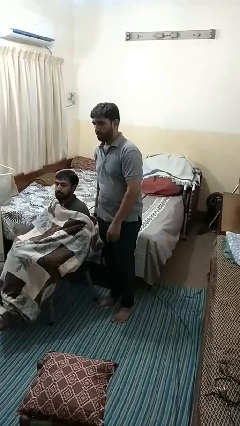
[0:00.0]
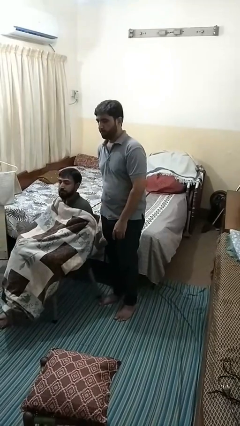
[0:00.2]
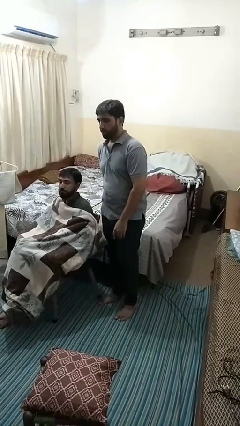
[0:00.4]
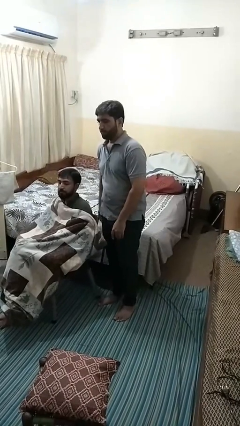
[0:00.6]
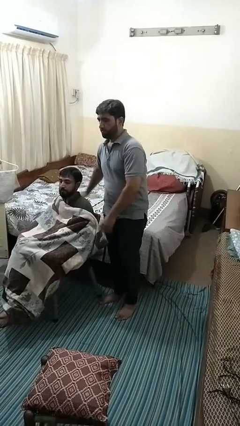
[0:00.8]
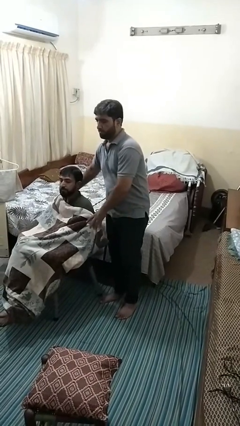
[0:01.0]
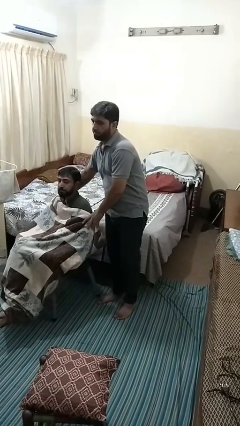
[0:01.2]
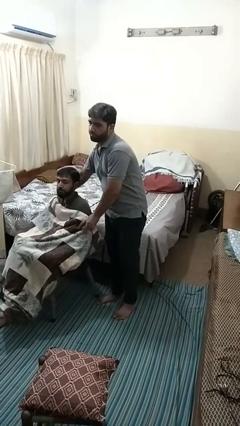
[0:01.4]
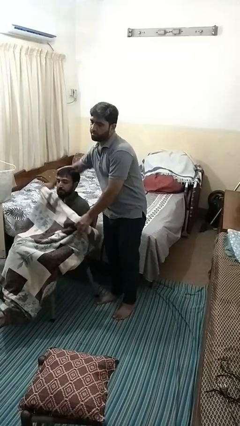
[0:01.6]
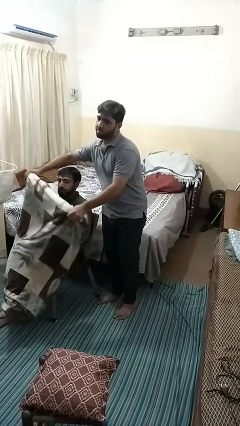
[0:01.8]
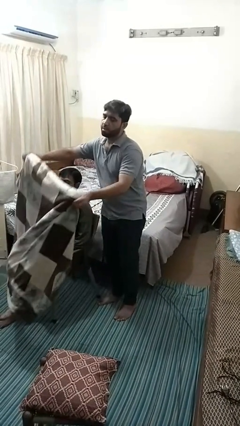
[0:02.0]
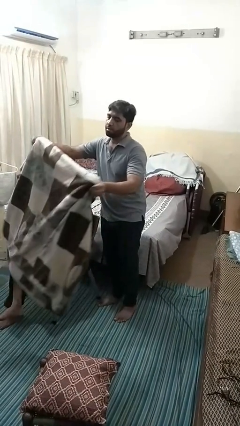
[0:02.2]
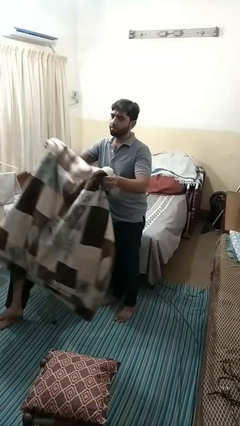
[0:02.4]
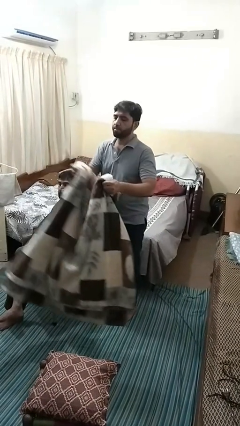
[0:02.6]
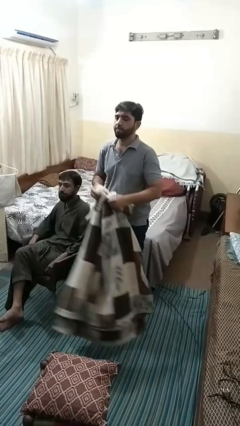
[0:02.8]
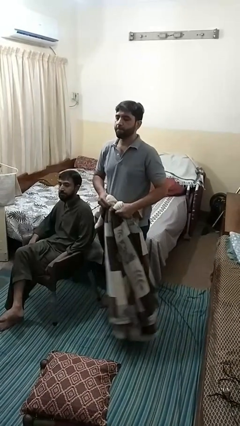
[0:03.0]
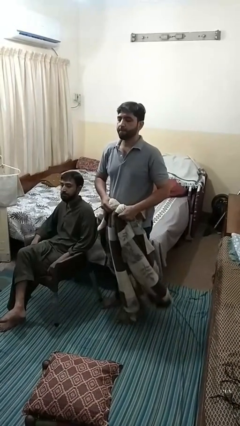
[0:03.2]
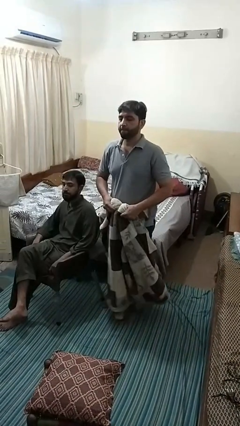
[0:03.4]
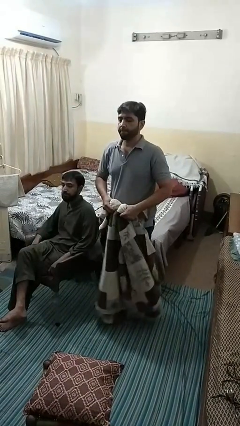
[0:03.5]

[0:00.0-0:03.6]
person uncovers friend with blanket

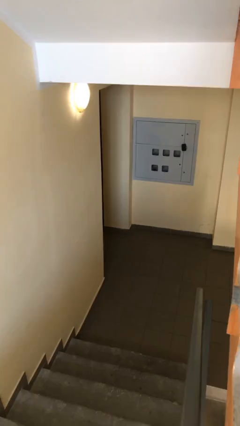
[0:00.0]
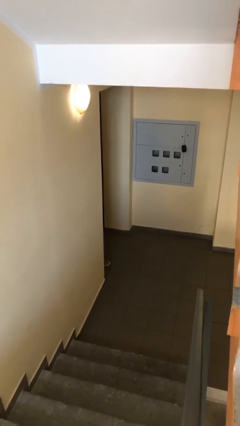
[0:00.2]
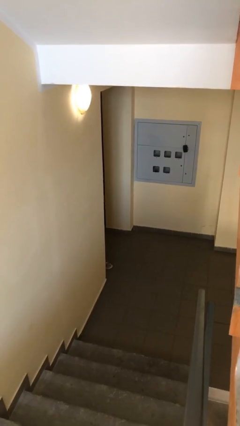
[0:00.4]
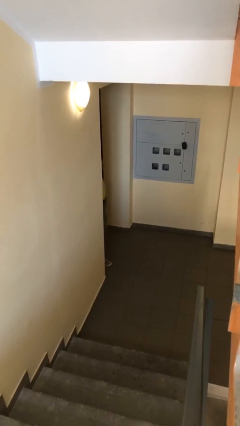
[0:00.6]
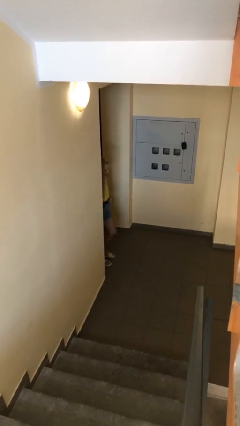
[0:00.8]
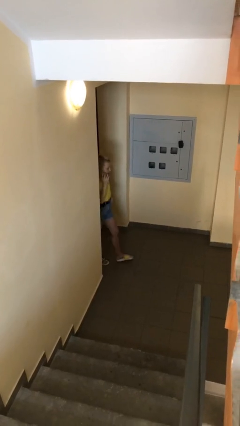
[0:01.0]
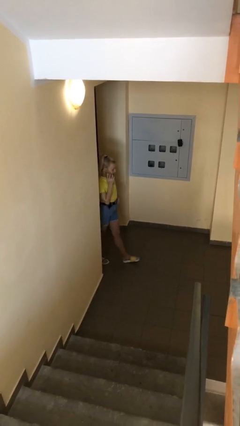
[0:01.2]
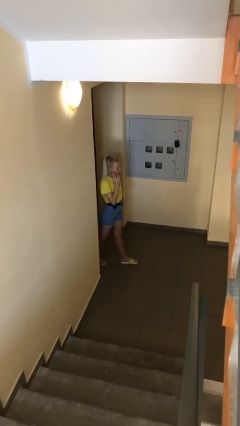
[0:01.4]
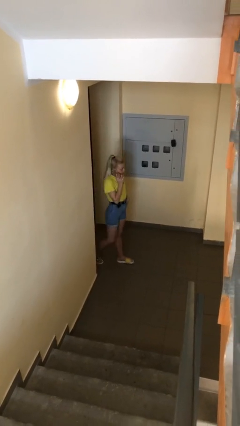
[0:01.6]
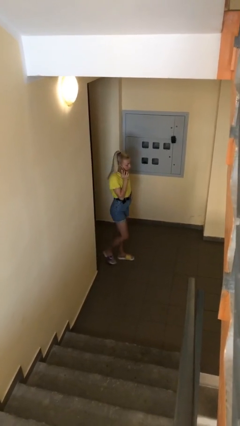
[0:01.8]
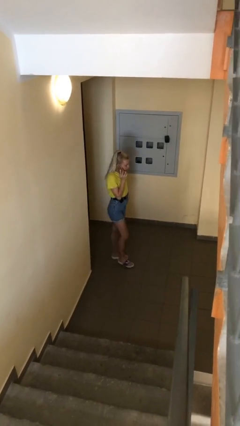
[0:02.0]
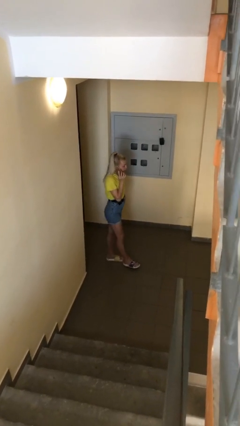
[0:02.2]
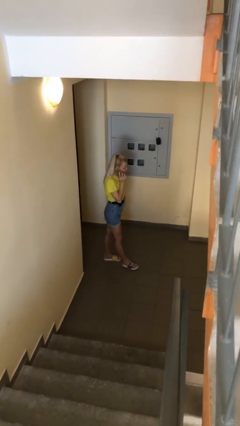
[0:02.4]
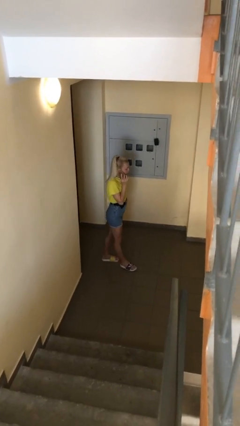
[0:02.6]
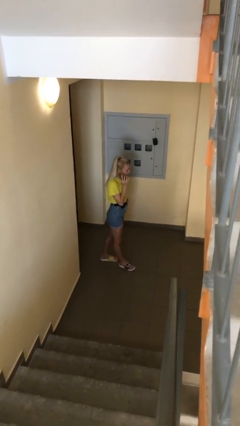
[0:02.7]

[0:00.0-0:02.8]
person enters scene through structure

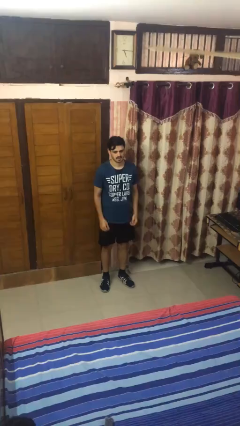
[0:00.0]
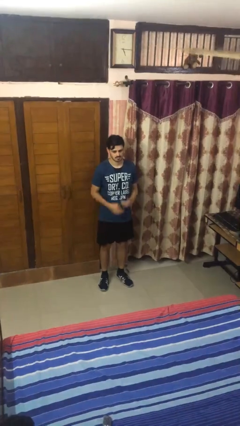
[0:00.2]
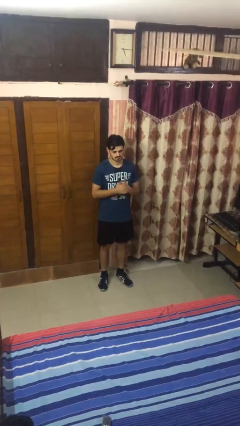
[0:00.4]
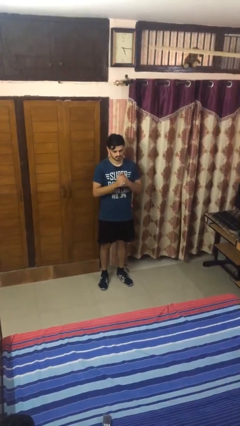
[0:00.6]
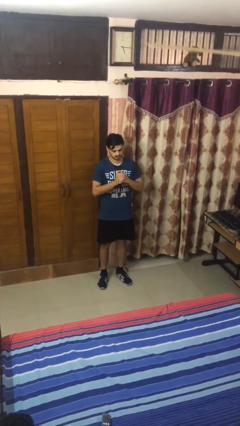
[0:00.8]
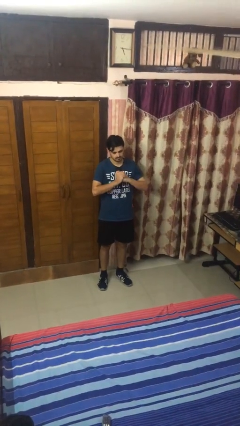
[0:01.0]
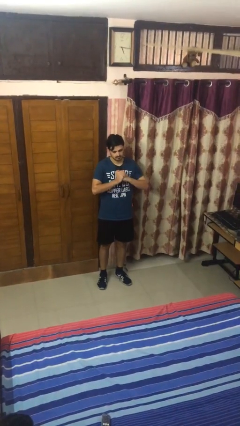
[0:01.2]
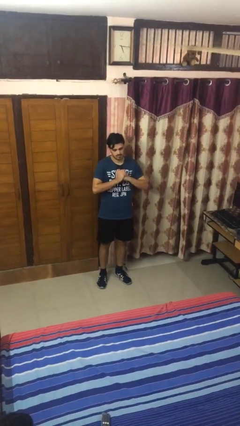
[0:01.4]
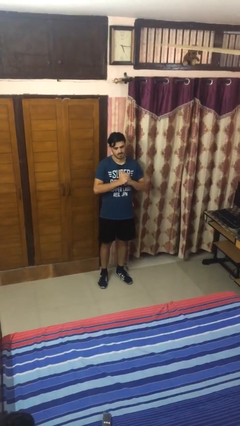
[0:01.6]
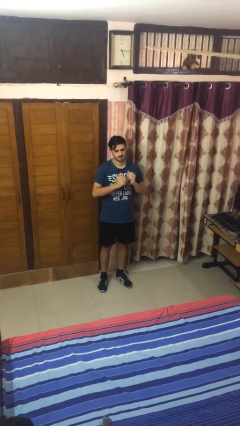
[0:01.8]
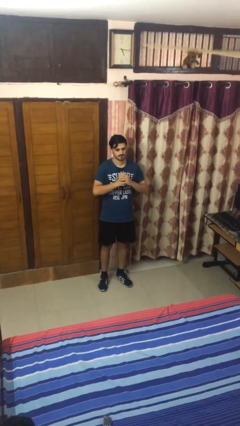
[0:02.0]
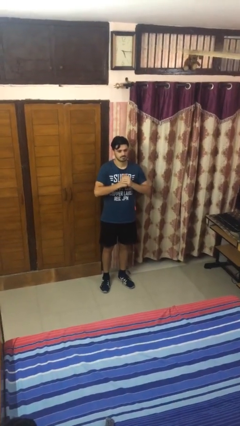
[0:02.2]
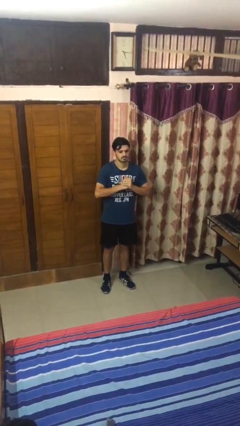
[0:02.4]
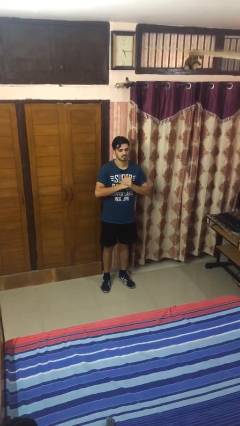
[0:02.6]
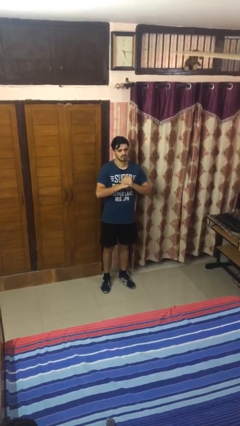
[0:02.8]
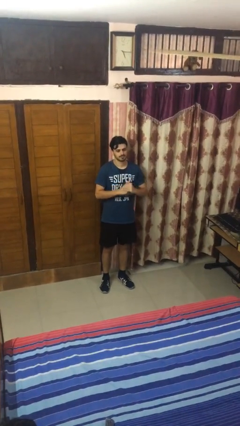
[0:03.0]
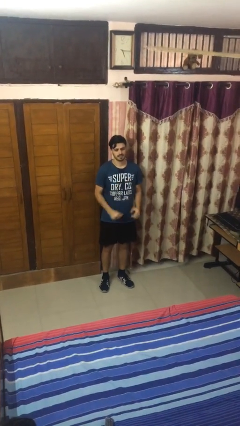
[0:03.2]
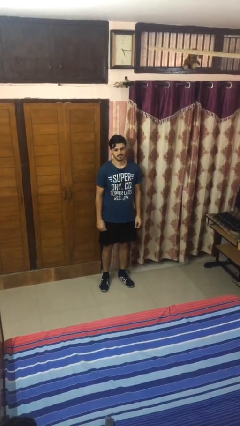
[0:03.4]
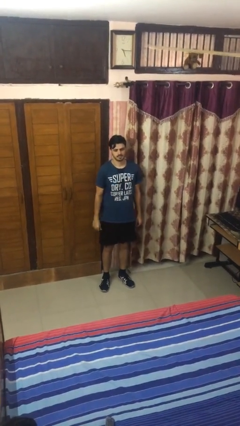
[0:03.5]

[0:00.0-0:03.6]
person cracks knuckles

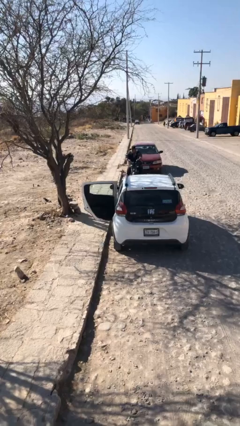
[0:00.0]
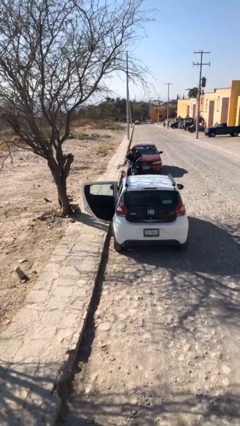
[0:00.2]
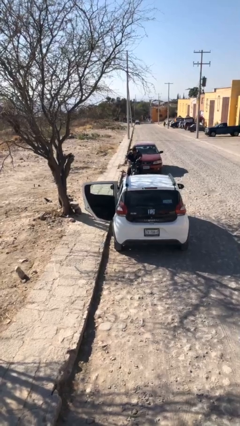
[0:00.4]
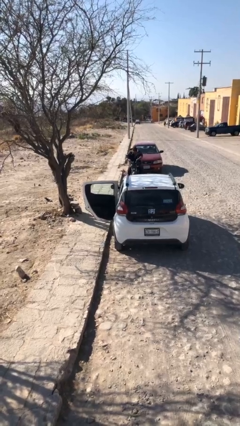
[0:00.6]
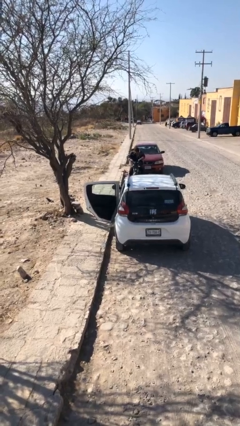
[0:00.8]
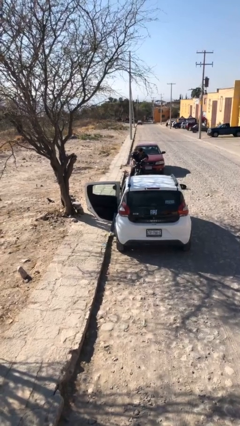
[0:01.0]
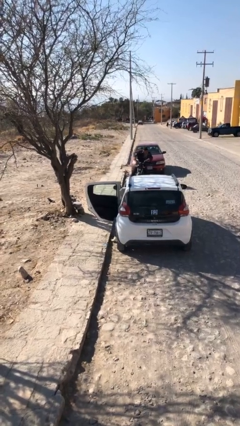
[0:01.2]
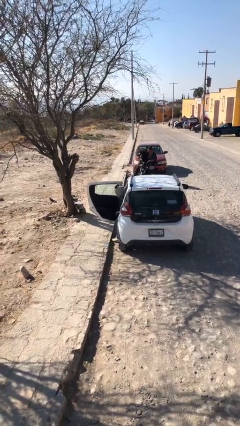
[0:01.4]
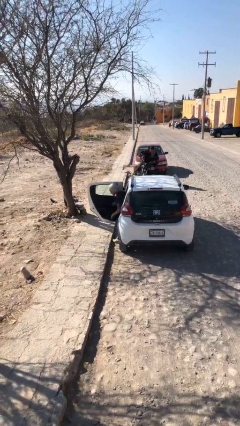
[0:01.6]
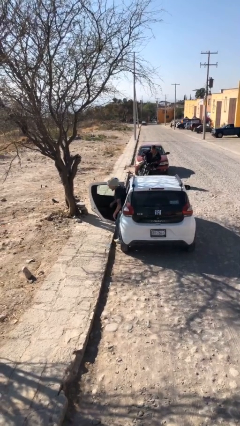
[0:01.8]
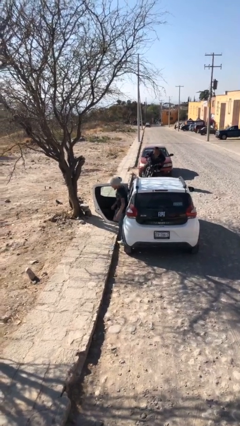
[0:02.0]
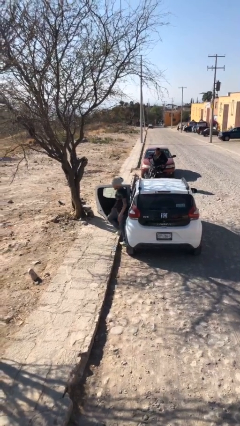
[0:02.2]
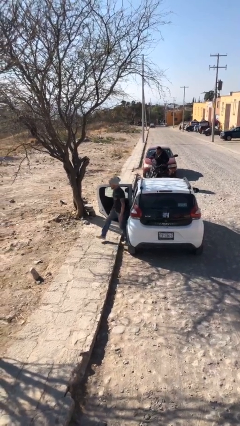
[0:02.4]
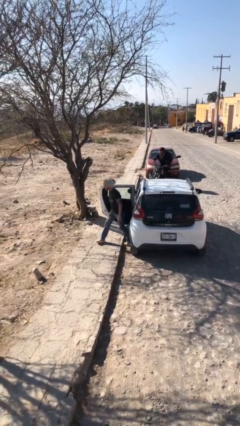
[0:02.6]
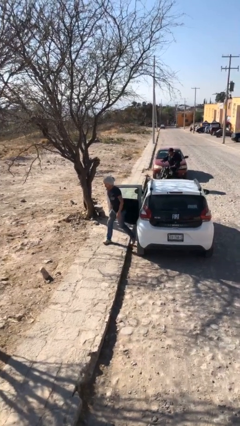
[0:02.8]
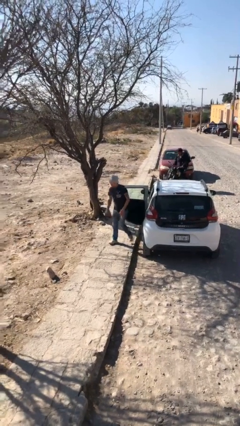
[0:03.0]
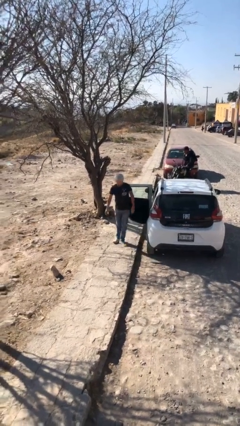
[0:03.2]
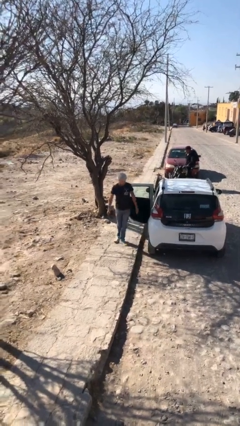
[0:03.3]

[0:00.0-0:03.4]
person exits car

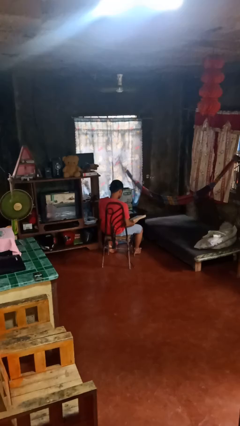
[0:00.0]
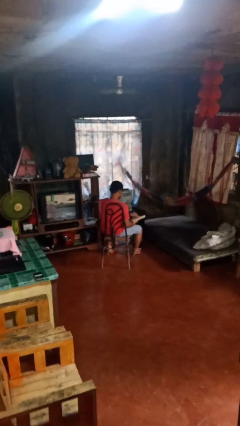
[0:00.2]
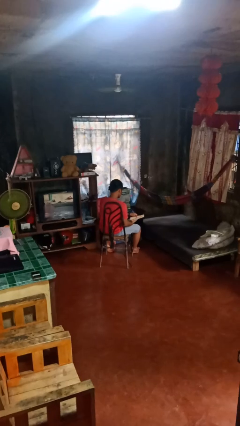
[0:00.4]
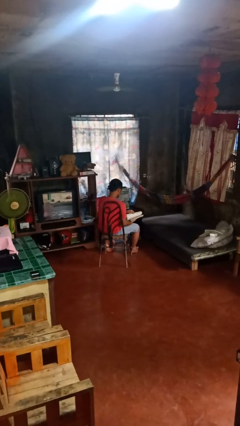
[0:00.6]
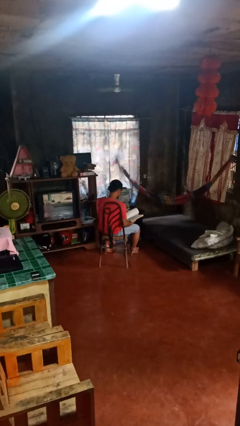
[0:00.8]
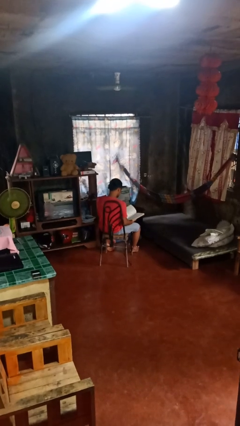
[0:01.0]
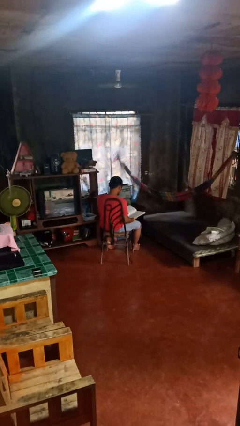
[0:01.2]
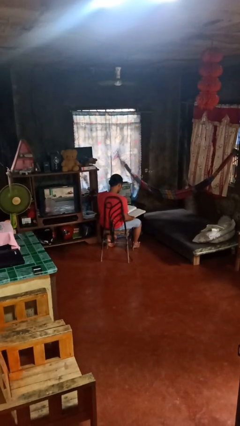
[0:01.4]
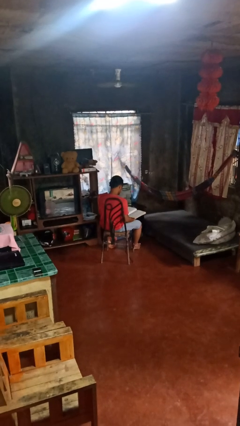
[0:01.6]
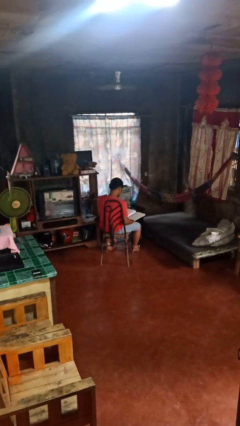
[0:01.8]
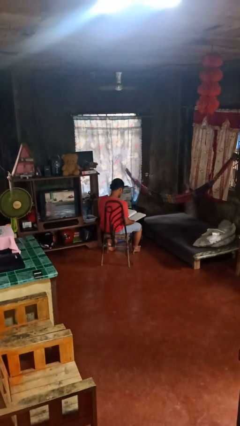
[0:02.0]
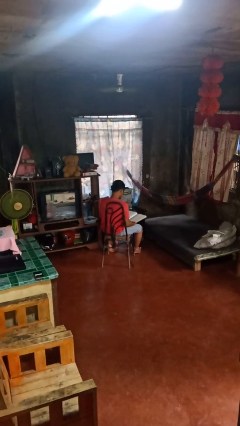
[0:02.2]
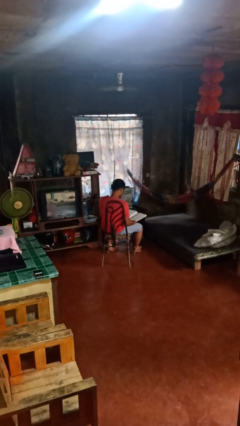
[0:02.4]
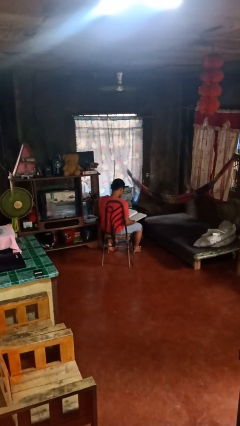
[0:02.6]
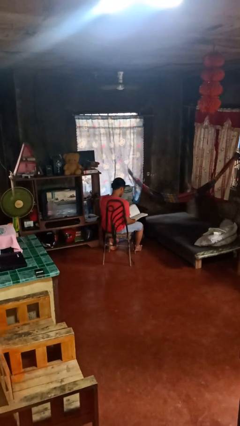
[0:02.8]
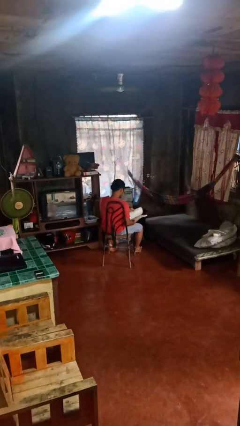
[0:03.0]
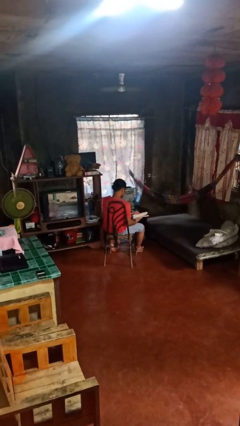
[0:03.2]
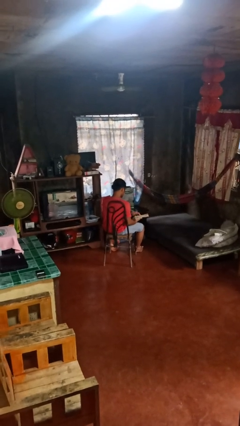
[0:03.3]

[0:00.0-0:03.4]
person reads book

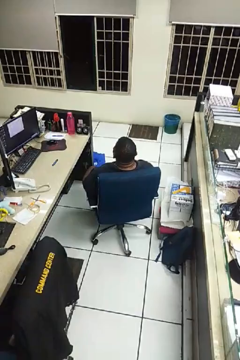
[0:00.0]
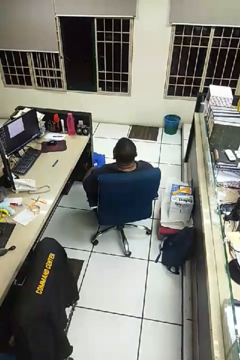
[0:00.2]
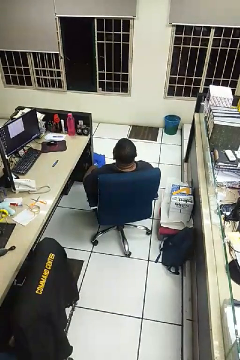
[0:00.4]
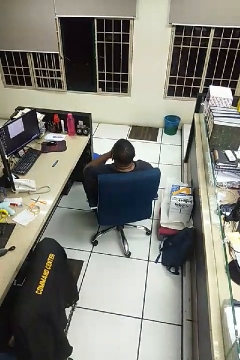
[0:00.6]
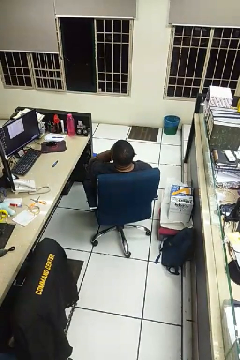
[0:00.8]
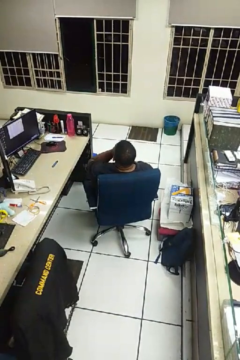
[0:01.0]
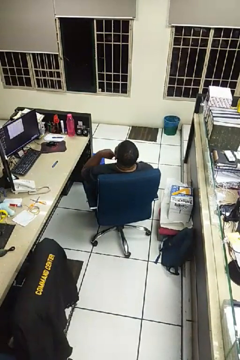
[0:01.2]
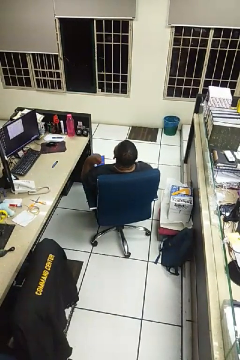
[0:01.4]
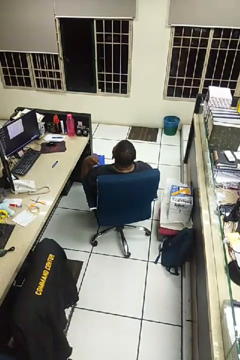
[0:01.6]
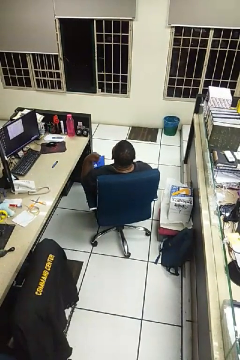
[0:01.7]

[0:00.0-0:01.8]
person gestures cut
